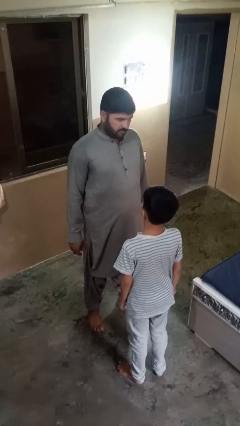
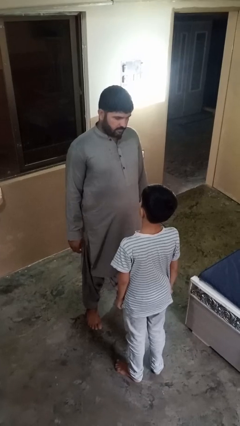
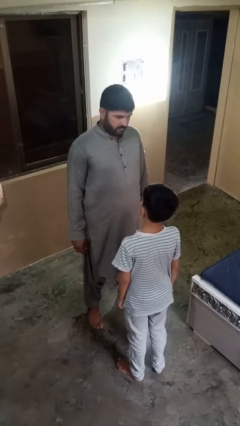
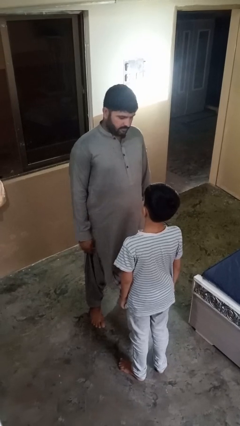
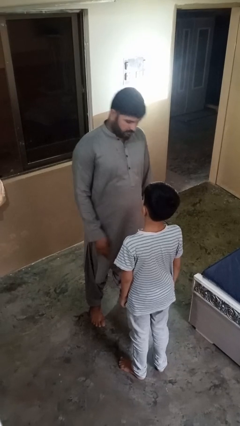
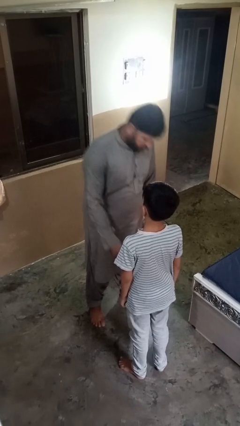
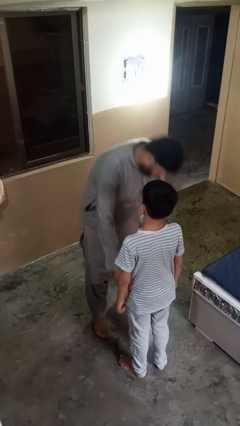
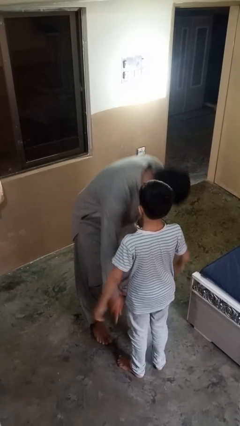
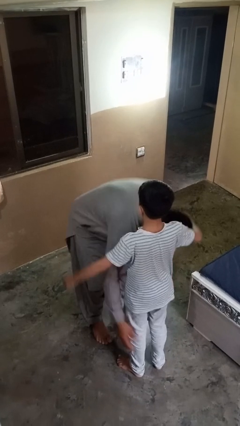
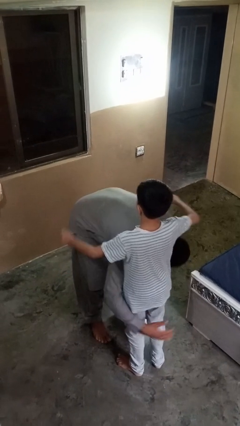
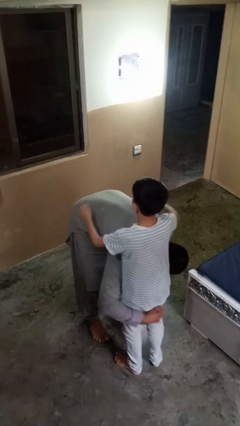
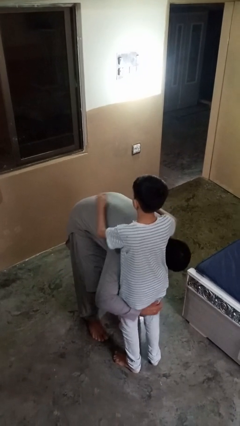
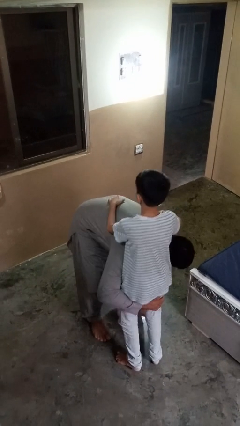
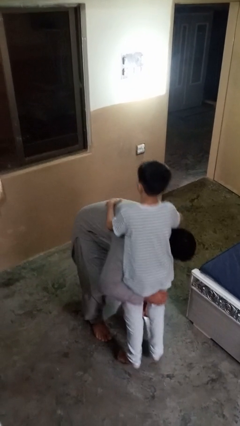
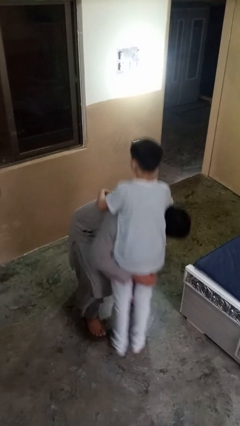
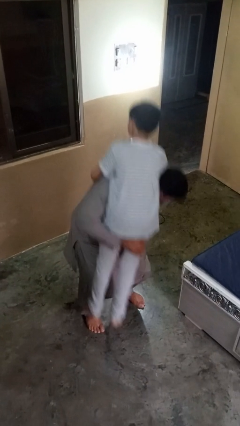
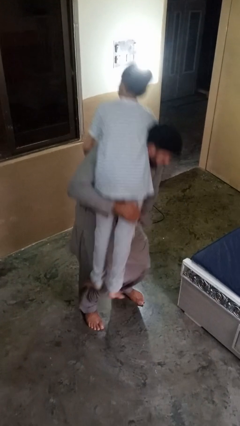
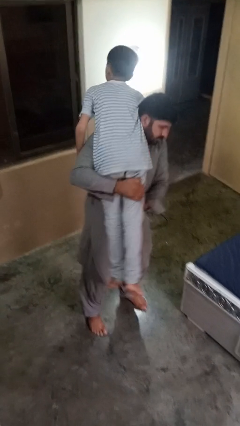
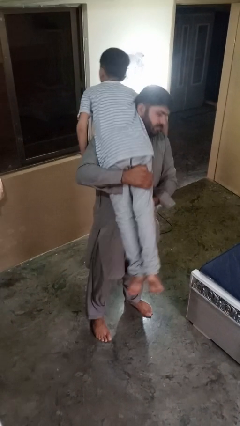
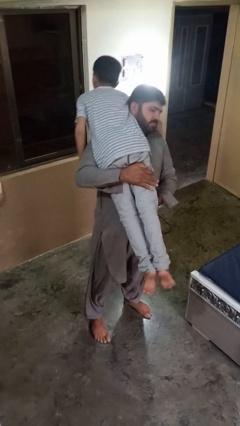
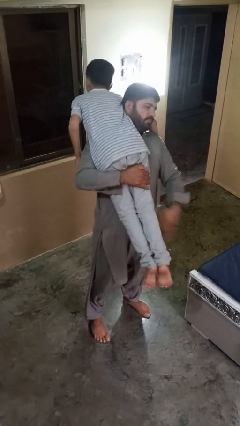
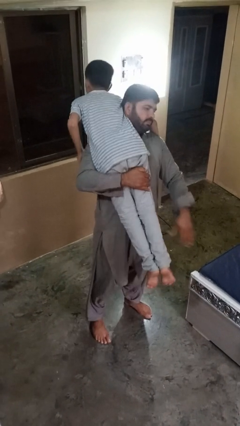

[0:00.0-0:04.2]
person carries person on shoulders

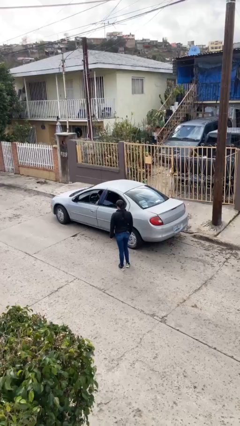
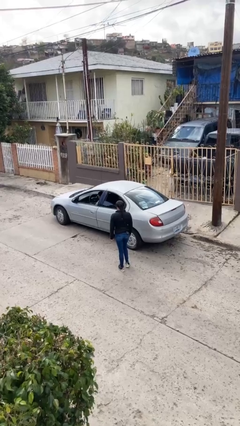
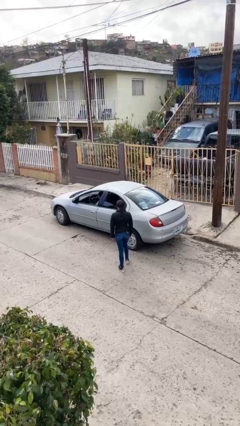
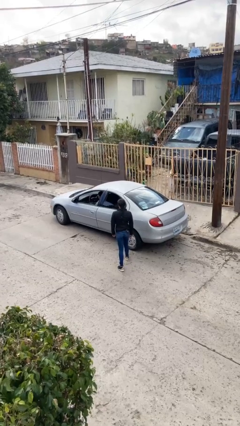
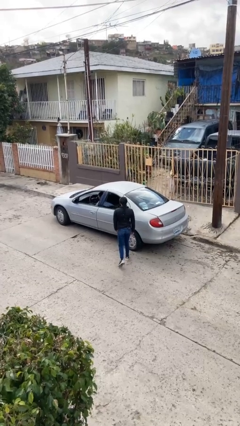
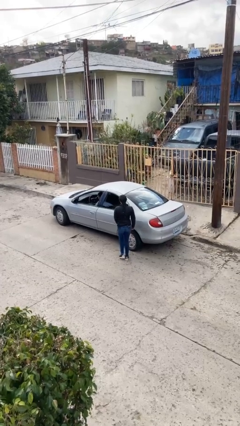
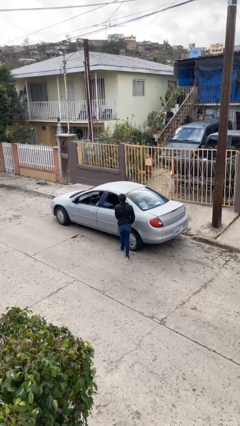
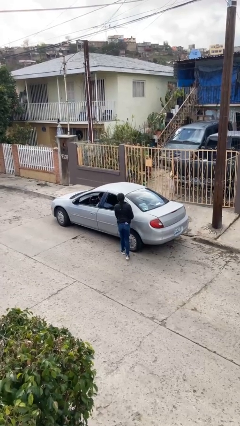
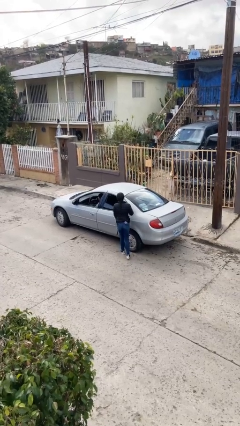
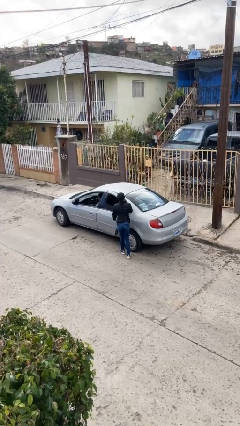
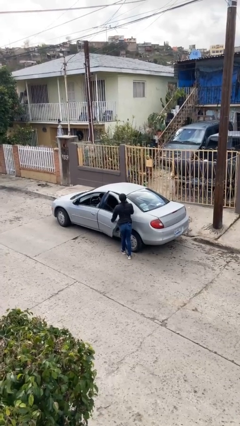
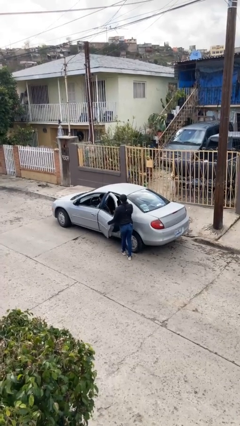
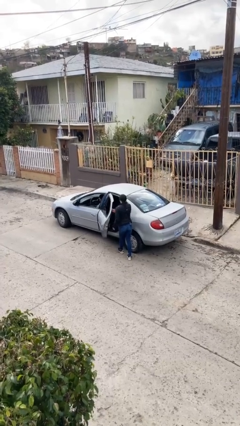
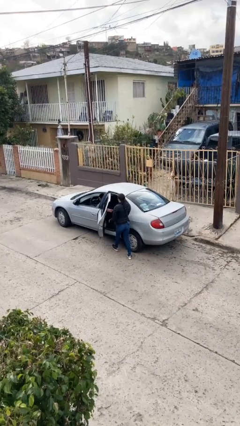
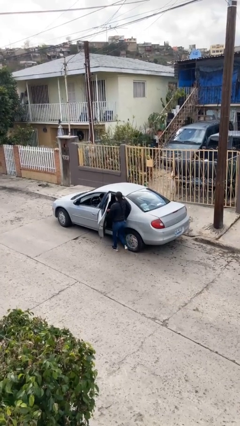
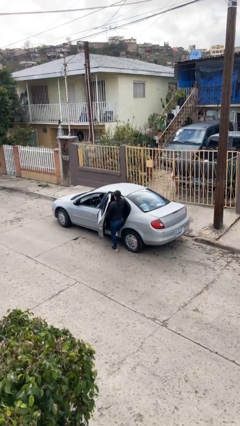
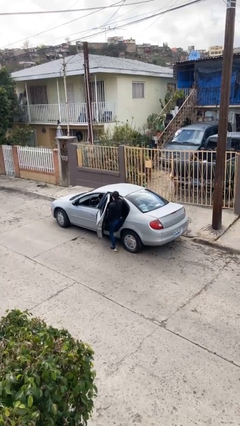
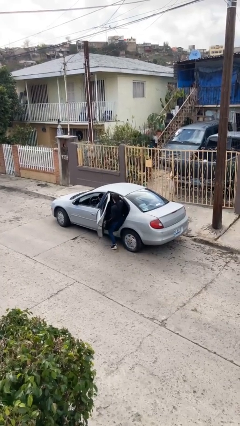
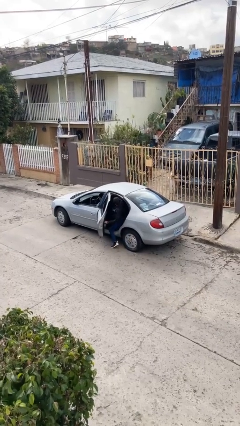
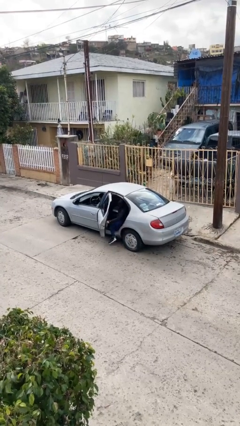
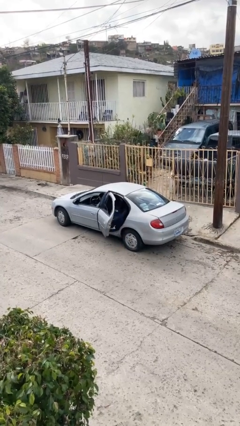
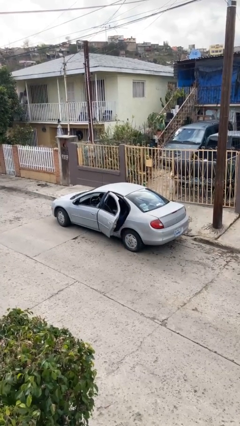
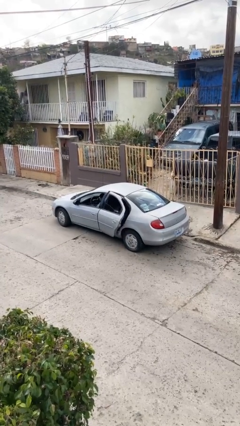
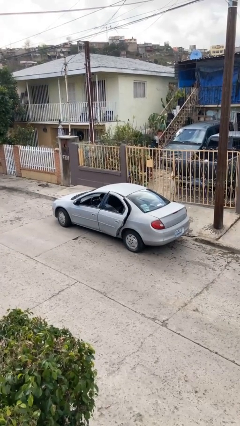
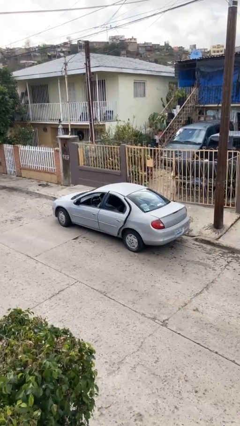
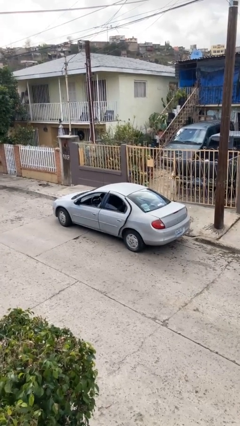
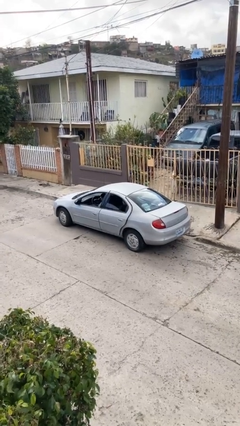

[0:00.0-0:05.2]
car picks up person

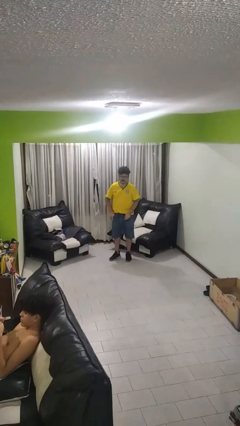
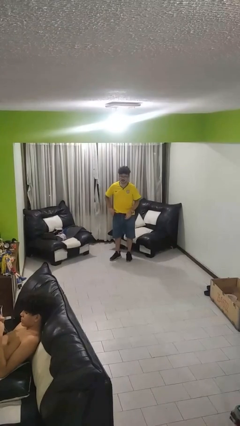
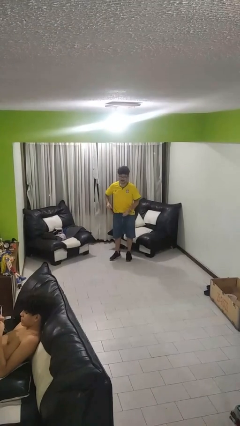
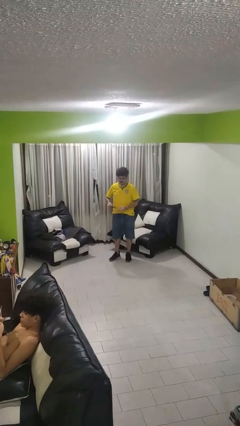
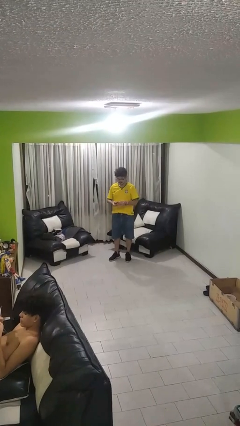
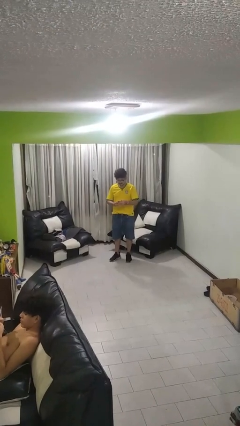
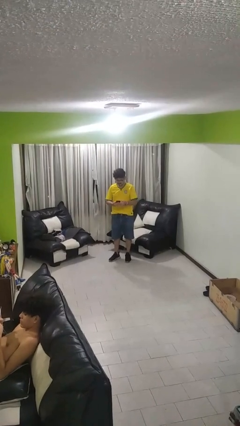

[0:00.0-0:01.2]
person takes phone from pocket

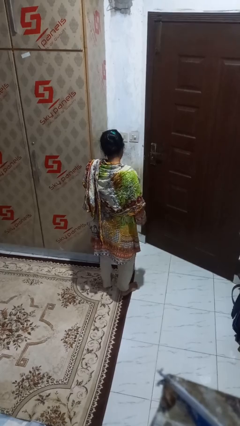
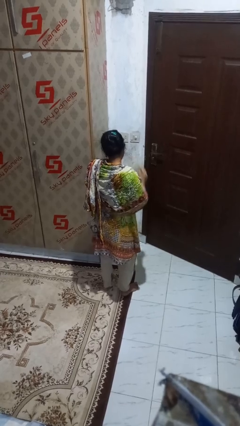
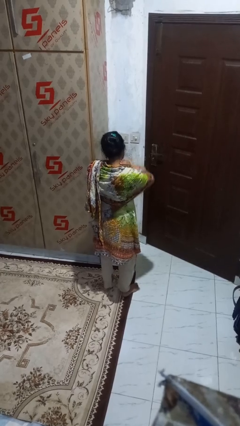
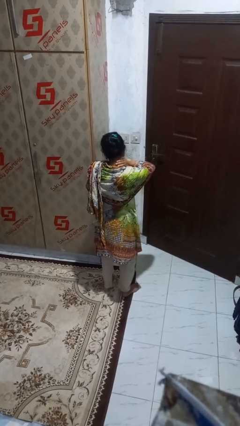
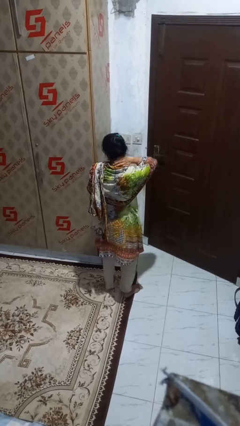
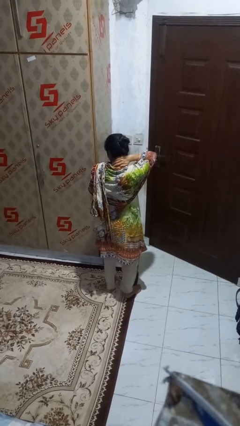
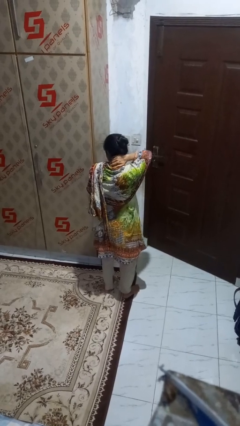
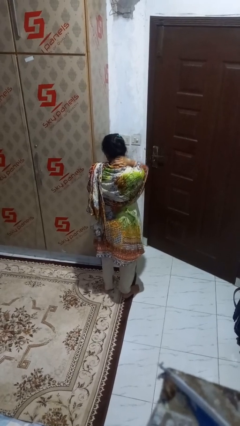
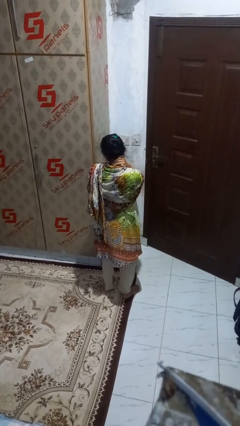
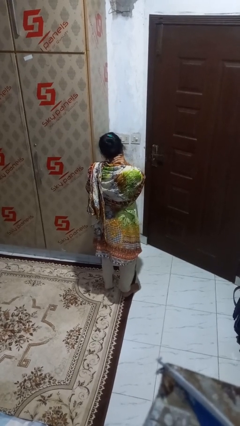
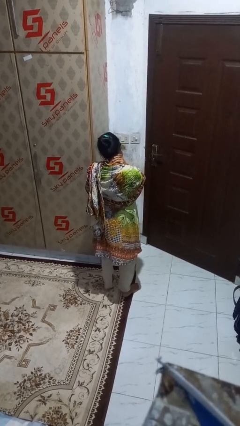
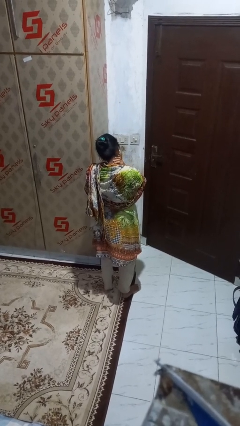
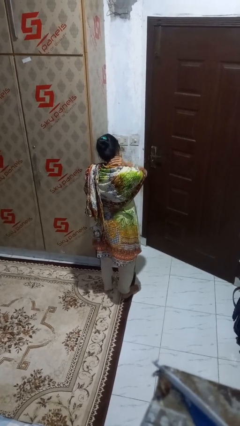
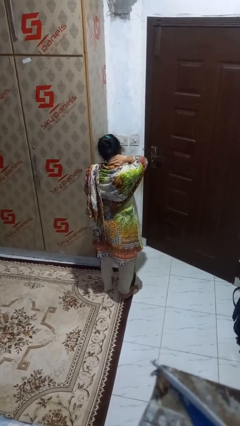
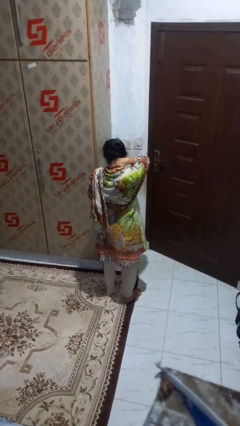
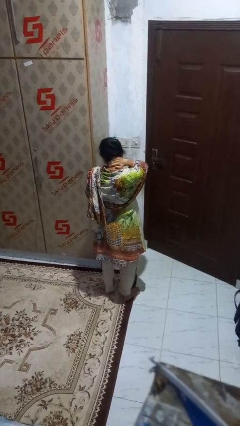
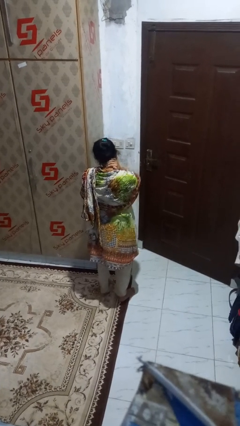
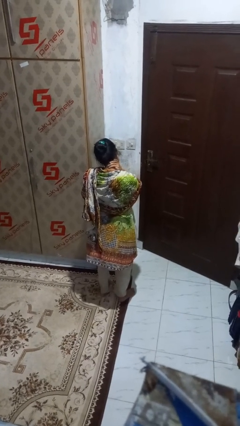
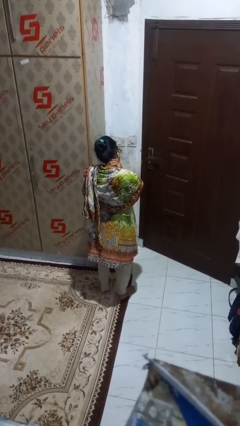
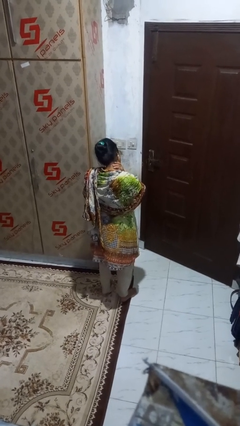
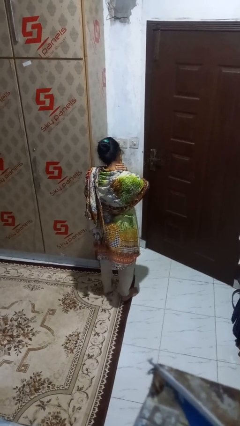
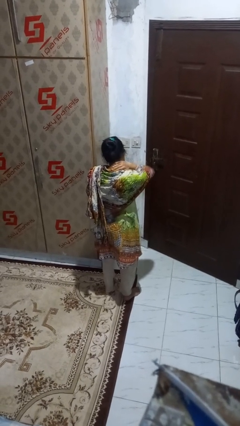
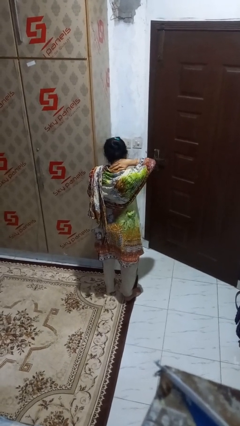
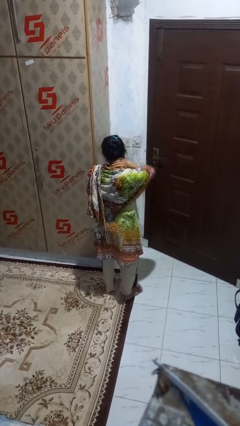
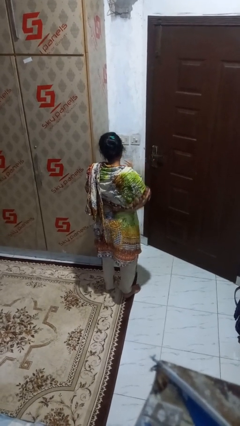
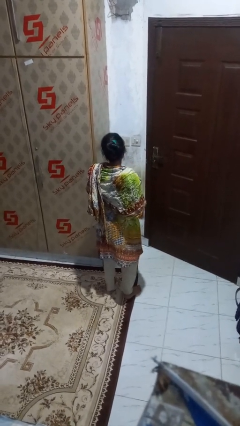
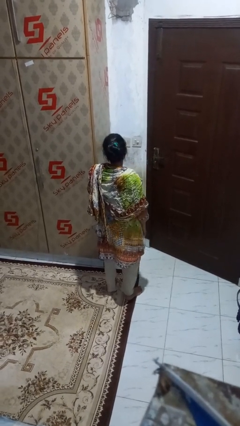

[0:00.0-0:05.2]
person rubs neck

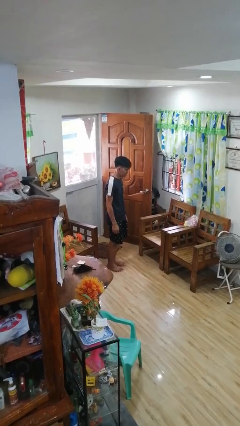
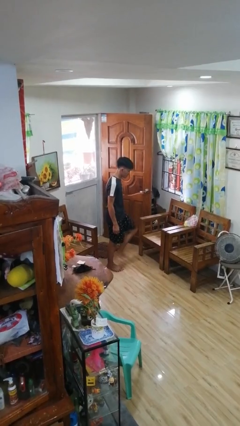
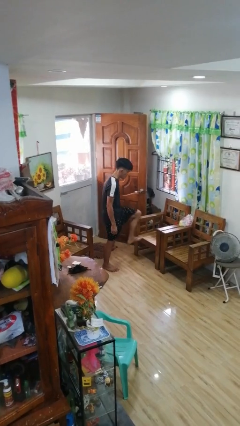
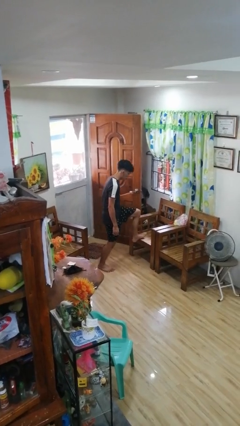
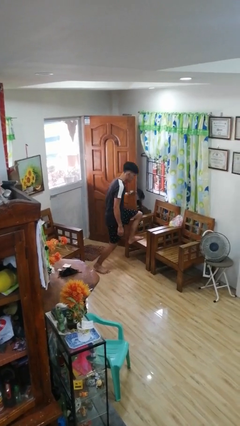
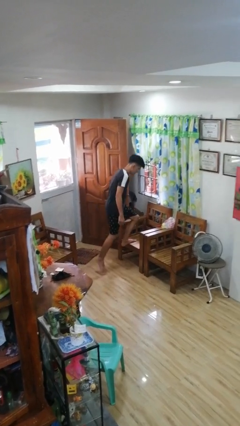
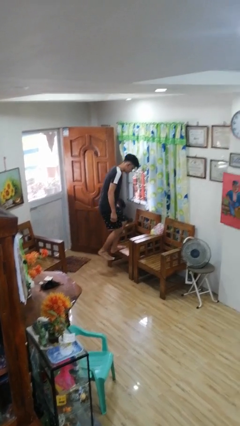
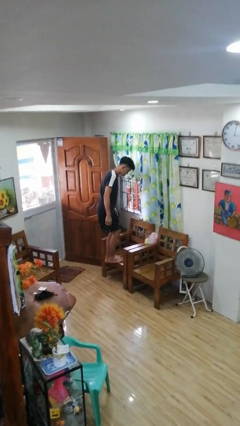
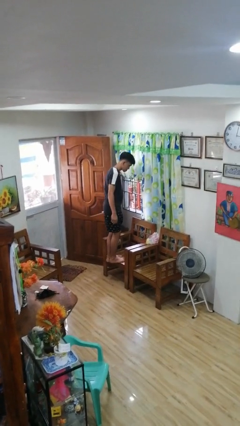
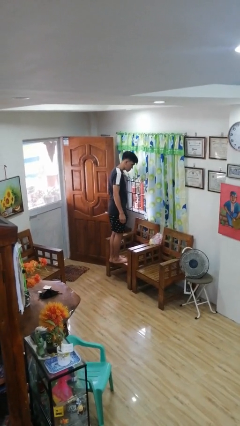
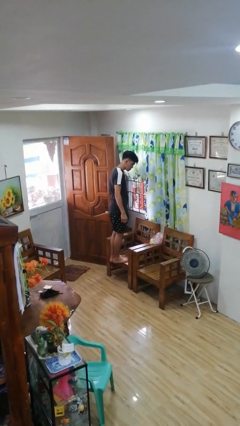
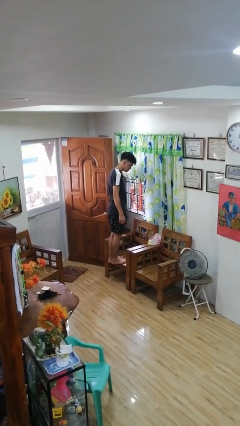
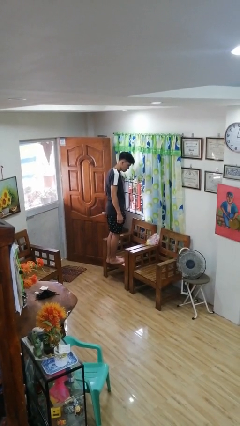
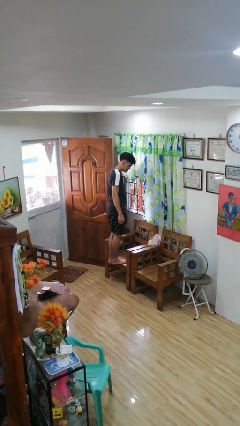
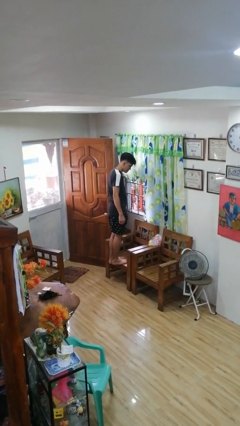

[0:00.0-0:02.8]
person climbs on chair
